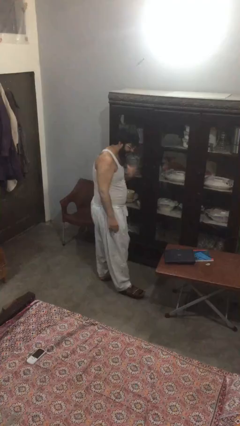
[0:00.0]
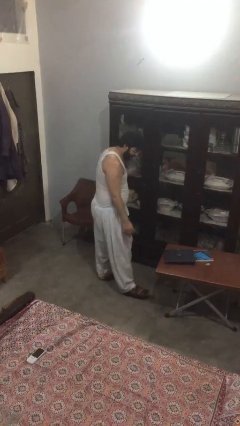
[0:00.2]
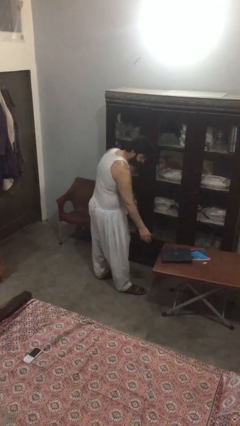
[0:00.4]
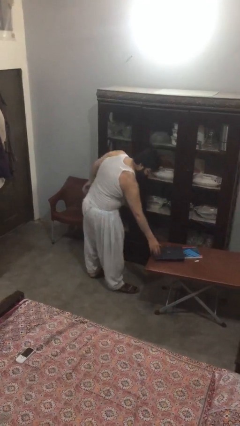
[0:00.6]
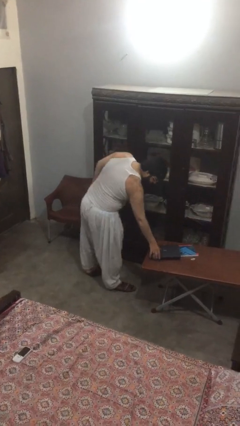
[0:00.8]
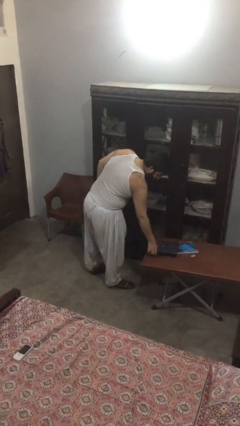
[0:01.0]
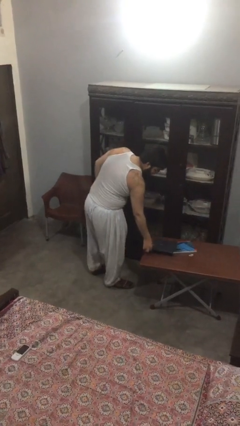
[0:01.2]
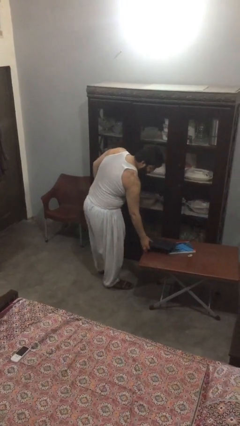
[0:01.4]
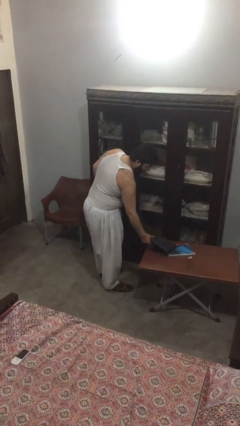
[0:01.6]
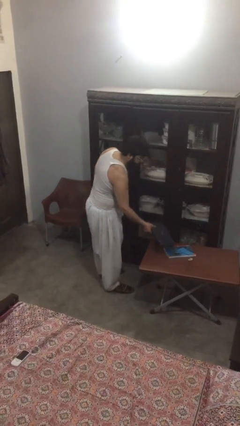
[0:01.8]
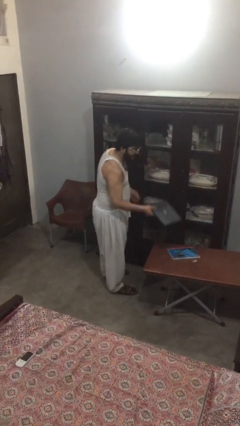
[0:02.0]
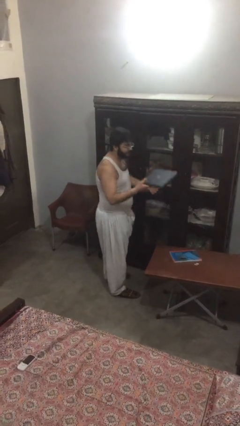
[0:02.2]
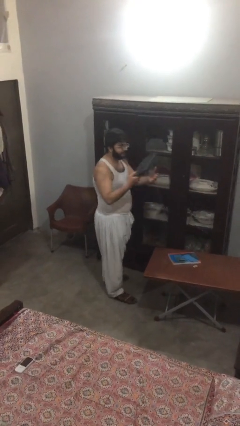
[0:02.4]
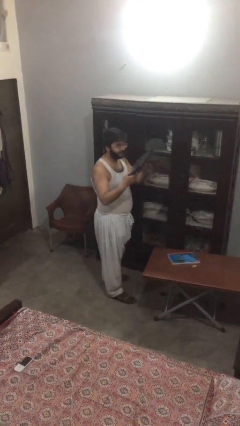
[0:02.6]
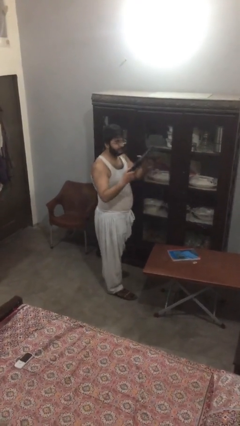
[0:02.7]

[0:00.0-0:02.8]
person picks up object from table

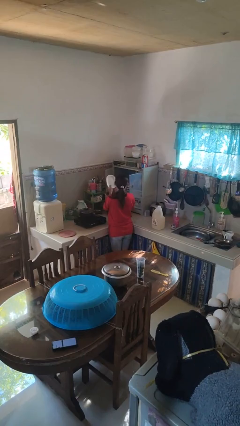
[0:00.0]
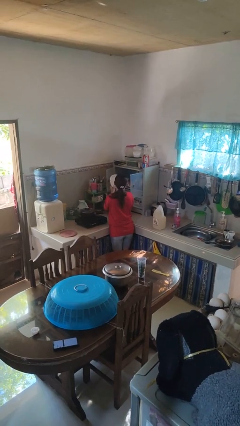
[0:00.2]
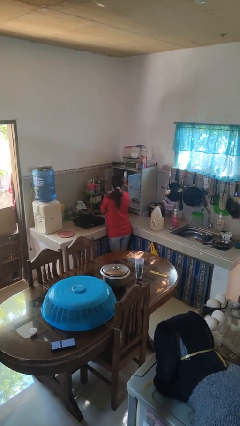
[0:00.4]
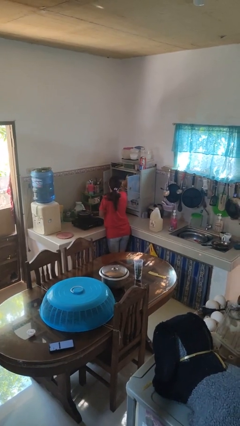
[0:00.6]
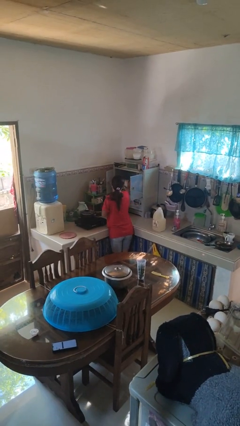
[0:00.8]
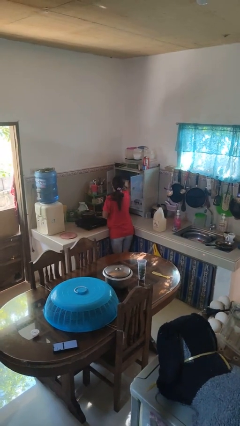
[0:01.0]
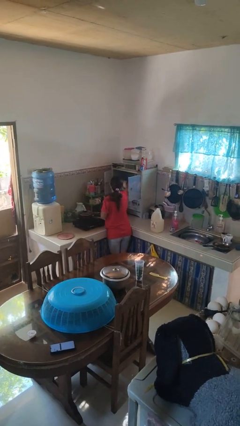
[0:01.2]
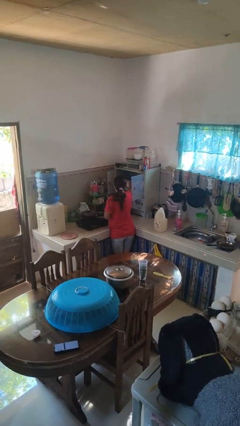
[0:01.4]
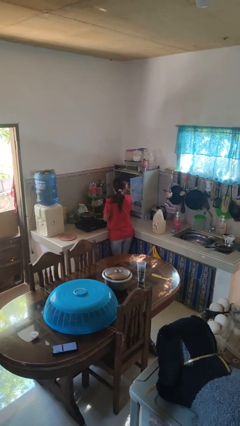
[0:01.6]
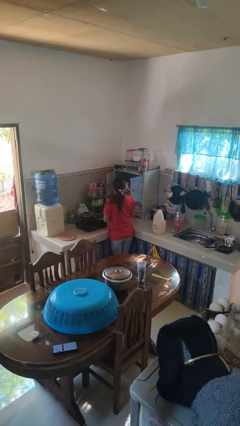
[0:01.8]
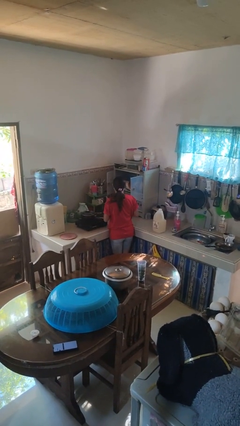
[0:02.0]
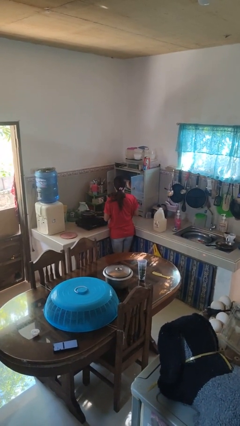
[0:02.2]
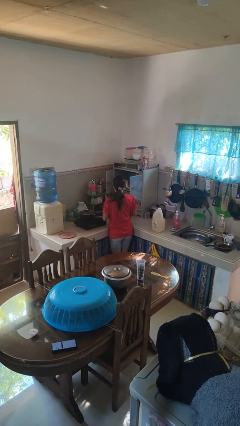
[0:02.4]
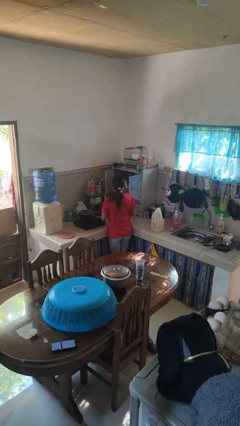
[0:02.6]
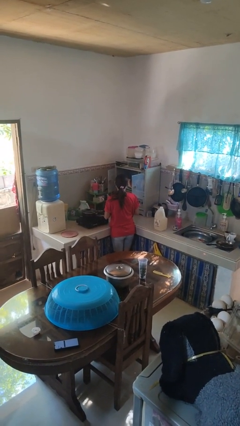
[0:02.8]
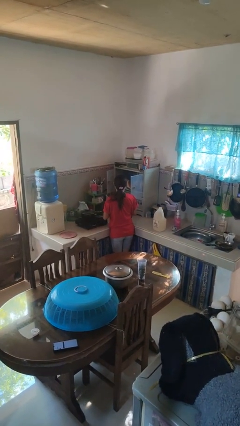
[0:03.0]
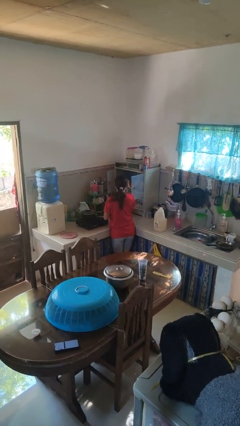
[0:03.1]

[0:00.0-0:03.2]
person puts object in cabinet

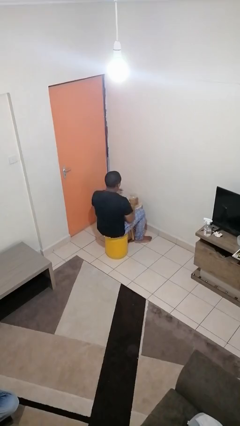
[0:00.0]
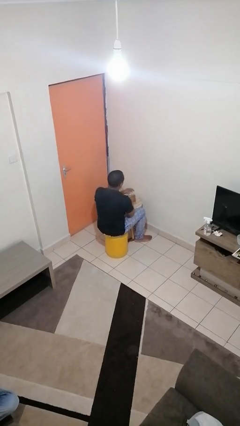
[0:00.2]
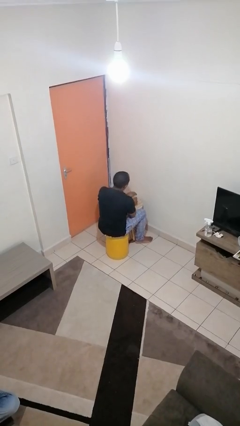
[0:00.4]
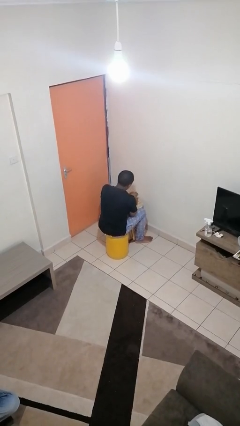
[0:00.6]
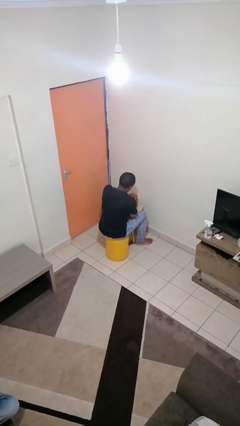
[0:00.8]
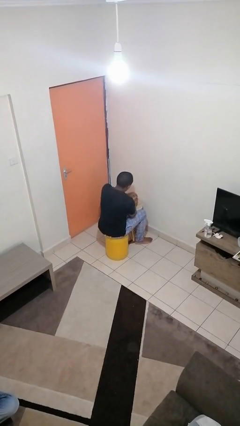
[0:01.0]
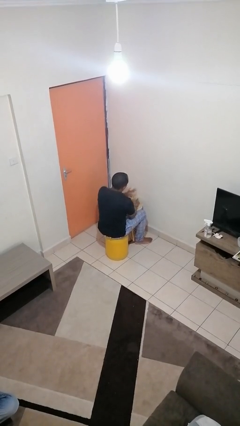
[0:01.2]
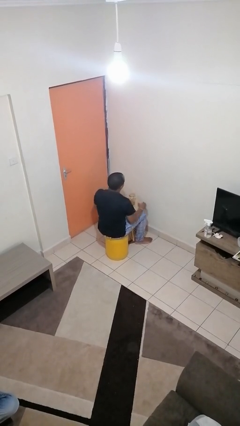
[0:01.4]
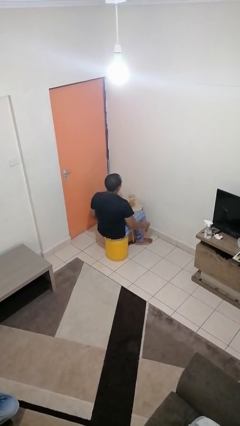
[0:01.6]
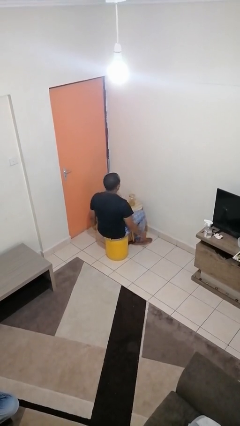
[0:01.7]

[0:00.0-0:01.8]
person closes jar

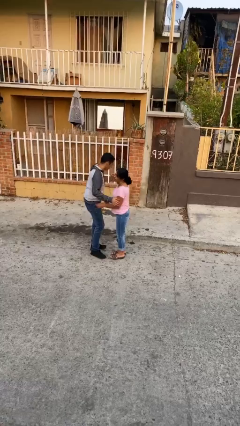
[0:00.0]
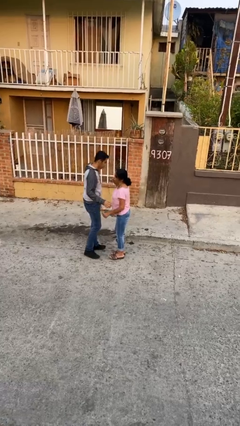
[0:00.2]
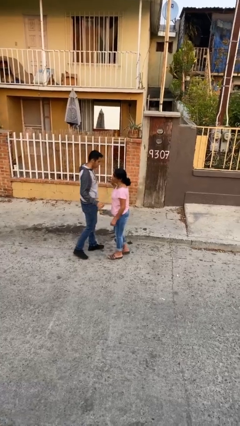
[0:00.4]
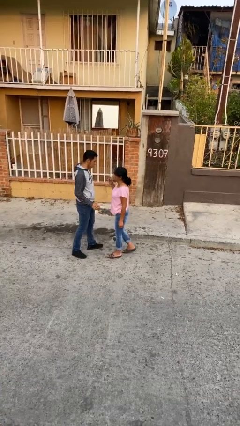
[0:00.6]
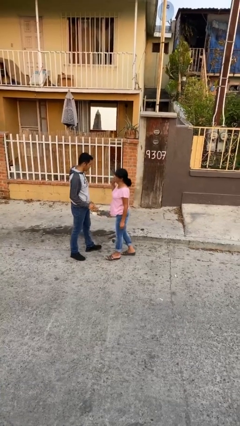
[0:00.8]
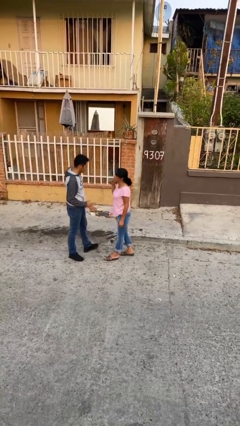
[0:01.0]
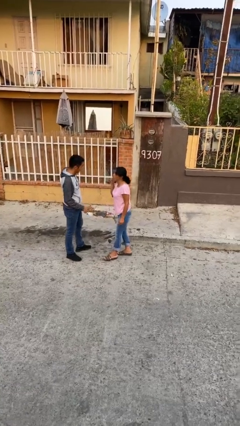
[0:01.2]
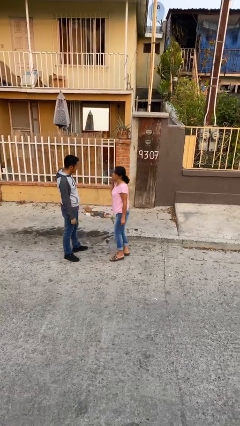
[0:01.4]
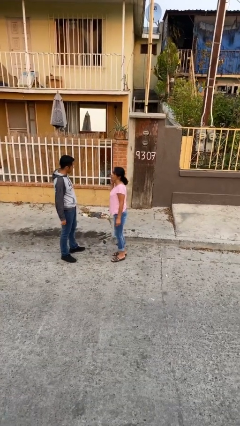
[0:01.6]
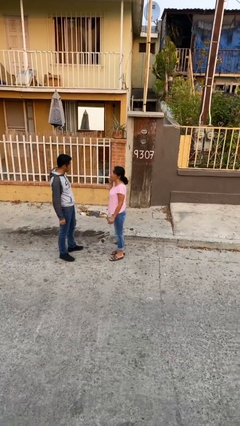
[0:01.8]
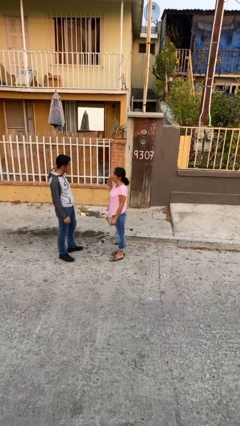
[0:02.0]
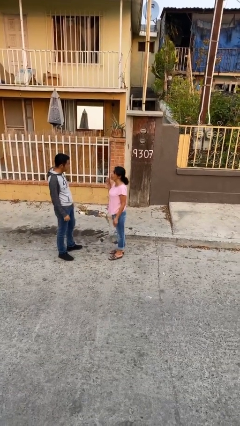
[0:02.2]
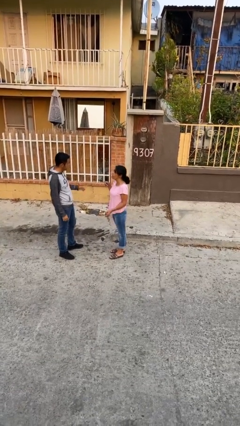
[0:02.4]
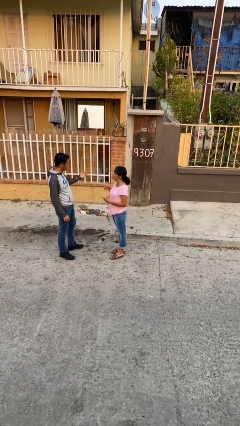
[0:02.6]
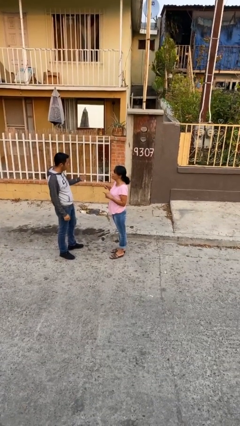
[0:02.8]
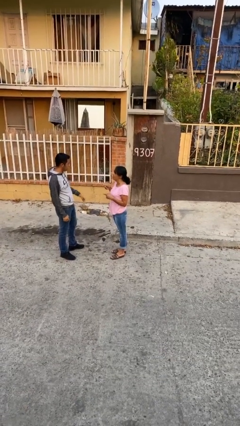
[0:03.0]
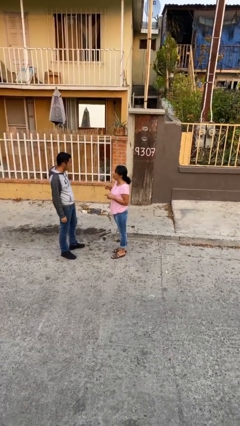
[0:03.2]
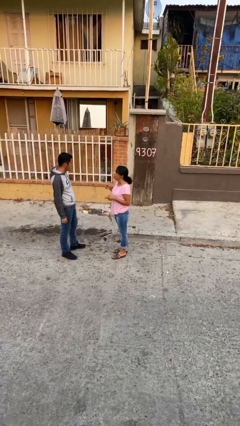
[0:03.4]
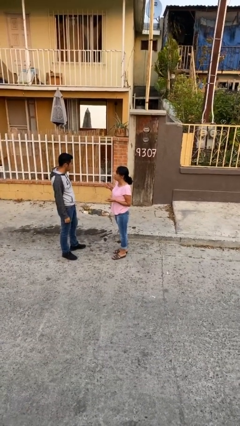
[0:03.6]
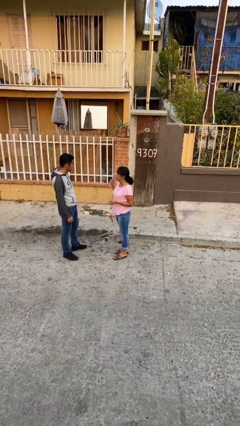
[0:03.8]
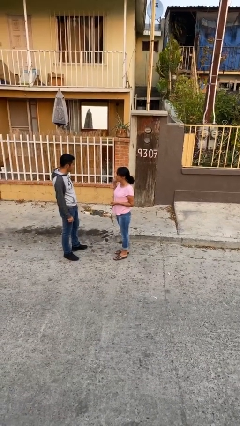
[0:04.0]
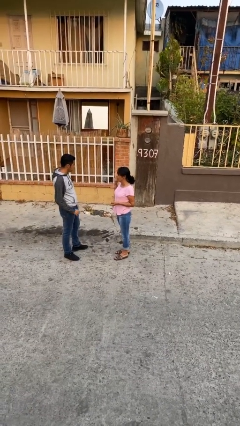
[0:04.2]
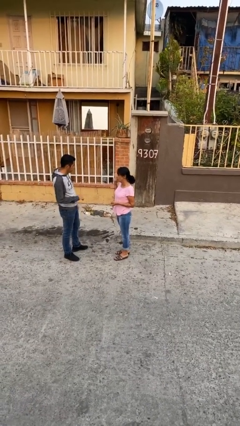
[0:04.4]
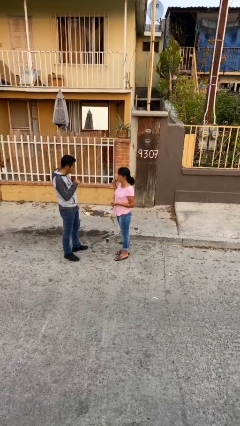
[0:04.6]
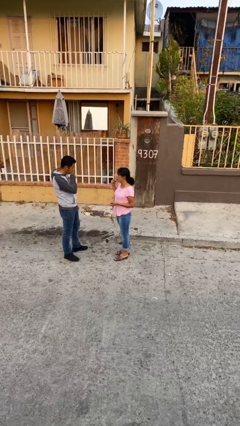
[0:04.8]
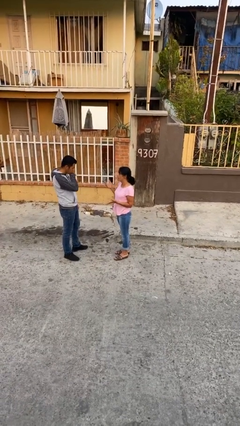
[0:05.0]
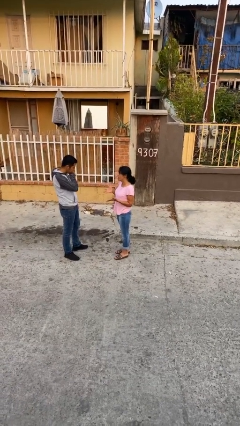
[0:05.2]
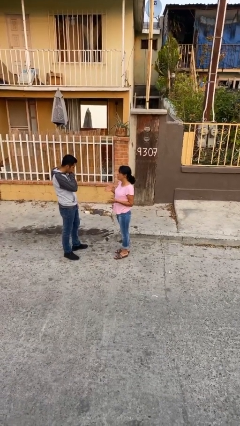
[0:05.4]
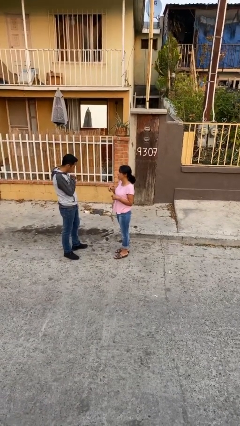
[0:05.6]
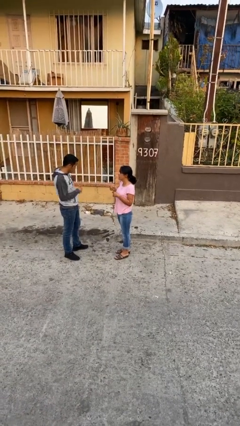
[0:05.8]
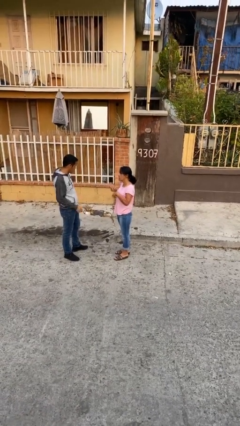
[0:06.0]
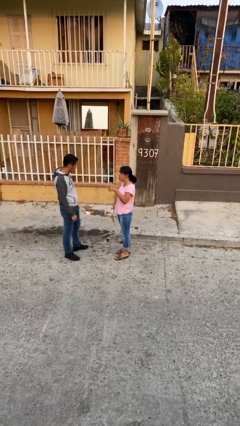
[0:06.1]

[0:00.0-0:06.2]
person talks to person

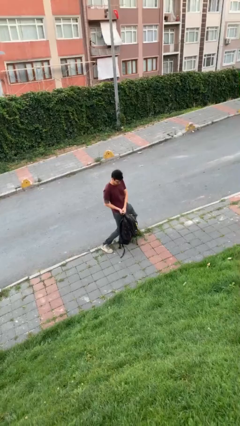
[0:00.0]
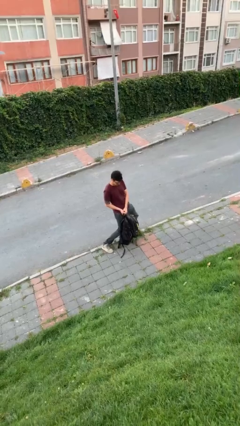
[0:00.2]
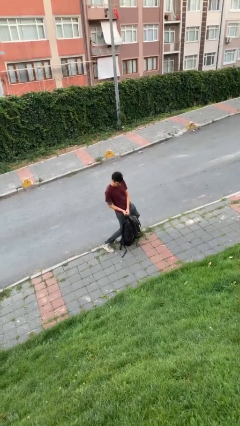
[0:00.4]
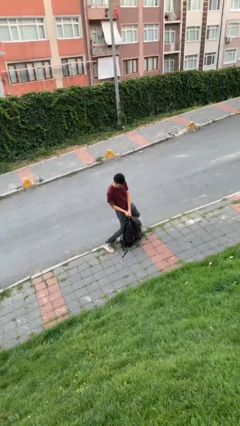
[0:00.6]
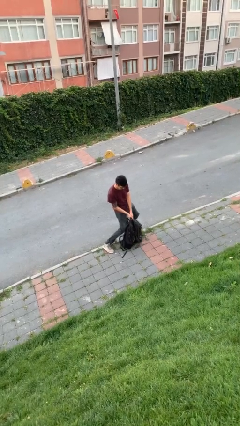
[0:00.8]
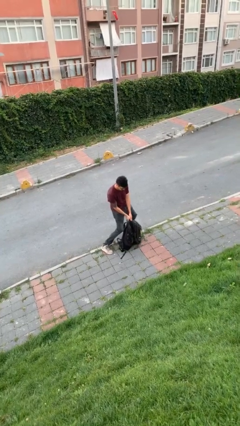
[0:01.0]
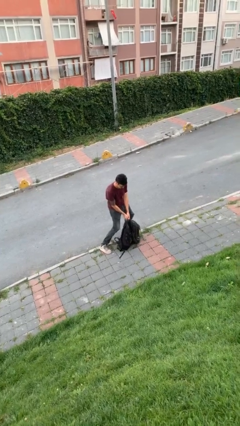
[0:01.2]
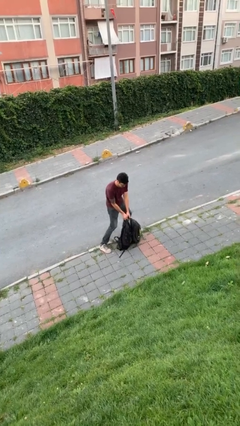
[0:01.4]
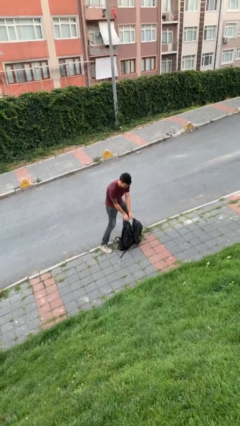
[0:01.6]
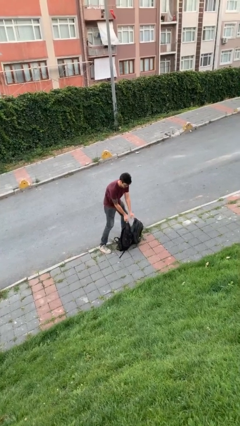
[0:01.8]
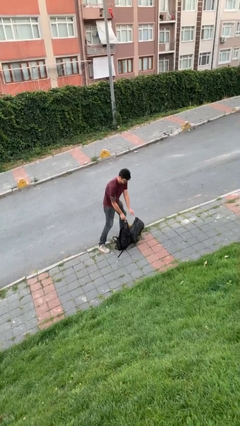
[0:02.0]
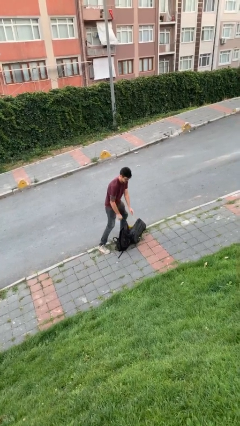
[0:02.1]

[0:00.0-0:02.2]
person puts down object on floor

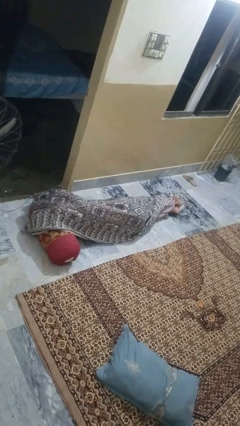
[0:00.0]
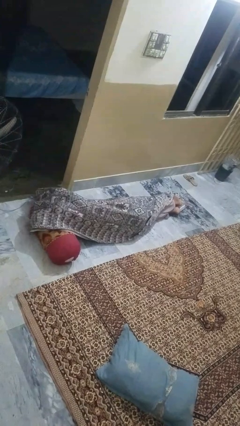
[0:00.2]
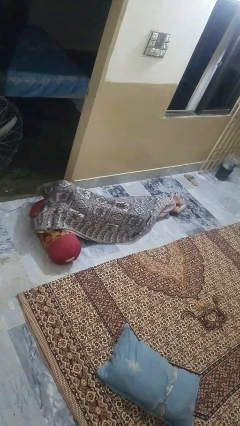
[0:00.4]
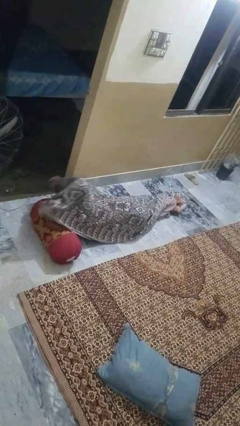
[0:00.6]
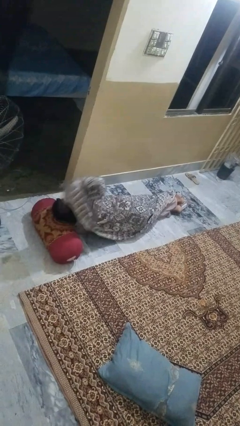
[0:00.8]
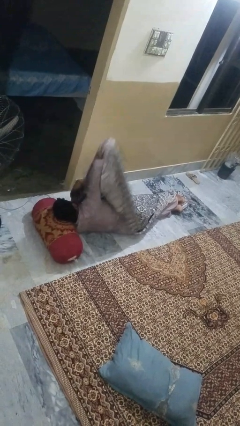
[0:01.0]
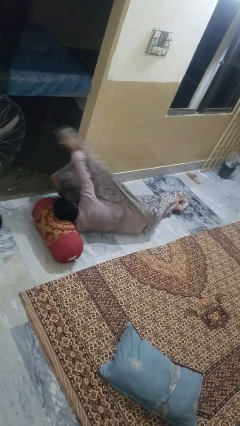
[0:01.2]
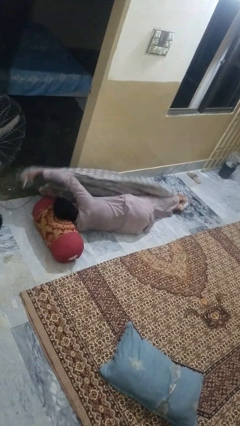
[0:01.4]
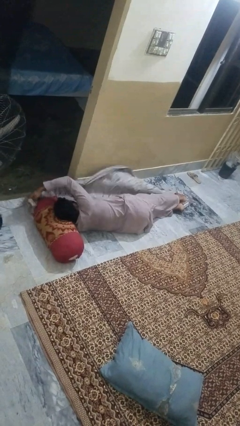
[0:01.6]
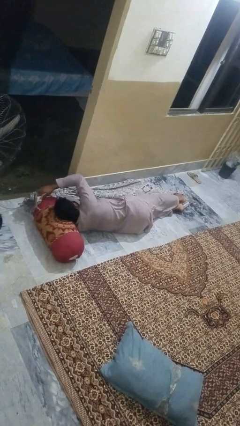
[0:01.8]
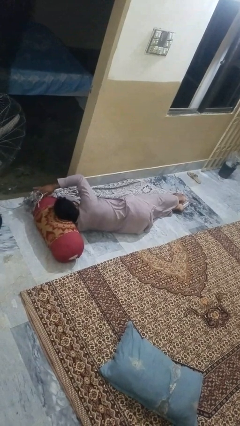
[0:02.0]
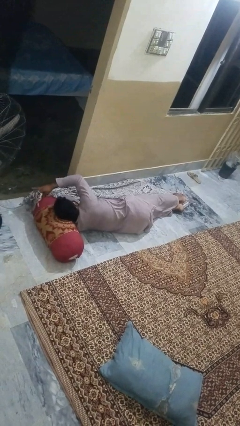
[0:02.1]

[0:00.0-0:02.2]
person uncovers with blanket
